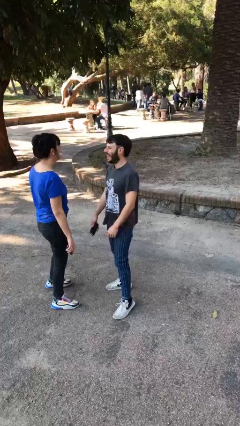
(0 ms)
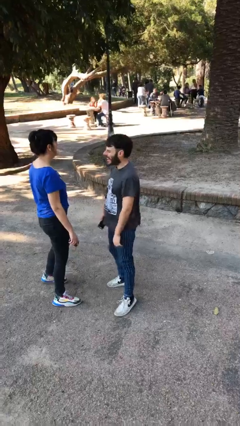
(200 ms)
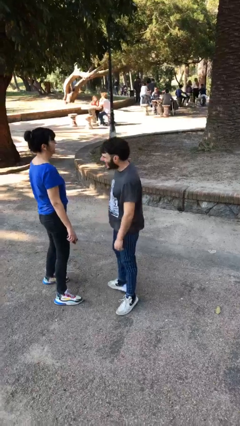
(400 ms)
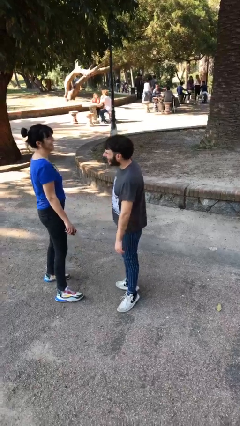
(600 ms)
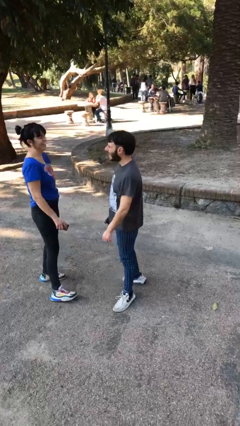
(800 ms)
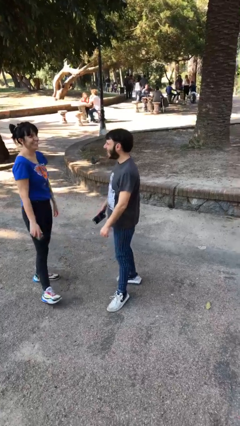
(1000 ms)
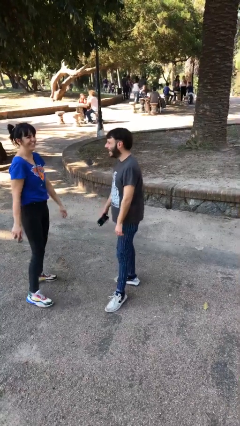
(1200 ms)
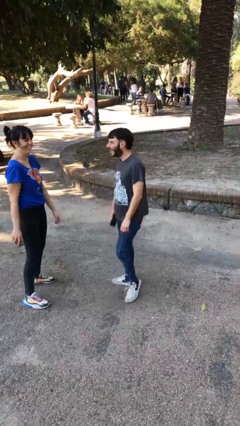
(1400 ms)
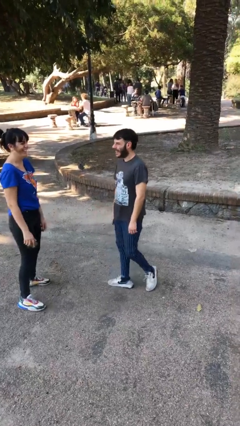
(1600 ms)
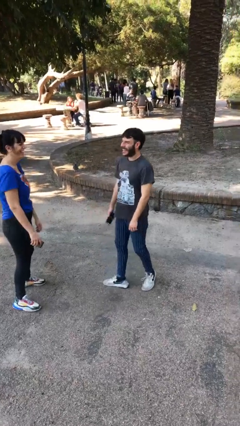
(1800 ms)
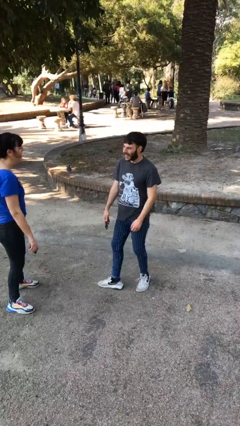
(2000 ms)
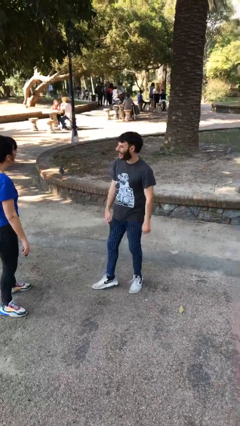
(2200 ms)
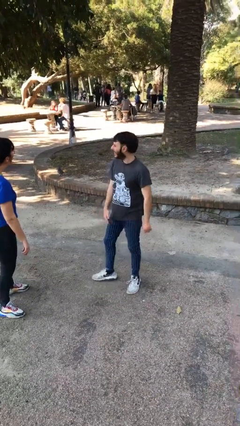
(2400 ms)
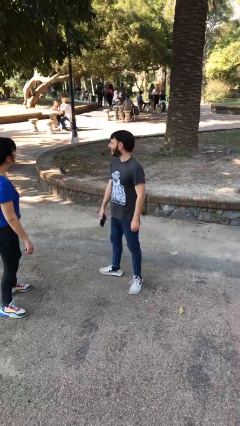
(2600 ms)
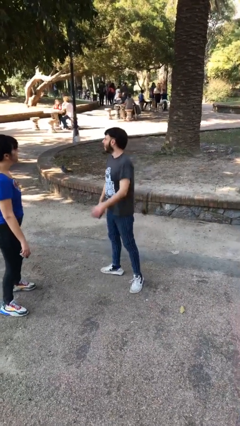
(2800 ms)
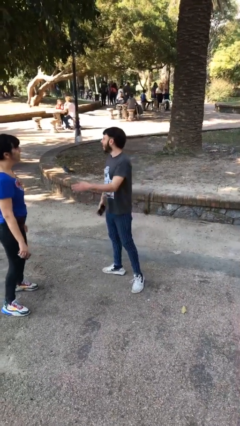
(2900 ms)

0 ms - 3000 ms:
person laughs with person

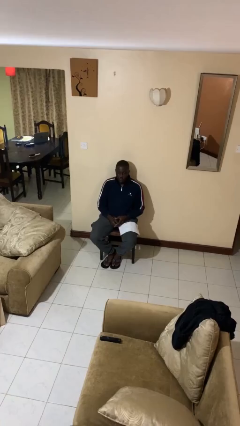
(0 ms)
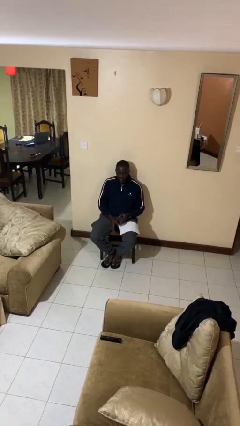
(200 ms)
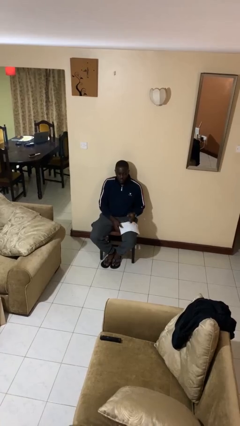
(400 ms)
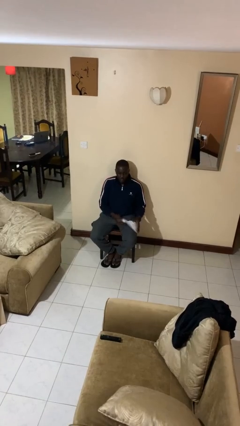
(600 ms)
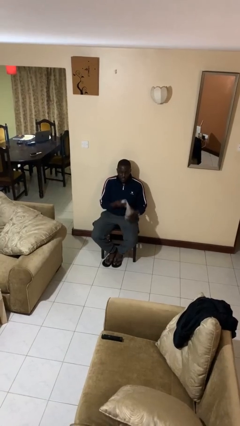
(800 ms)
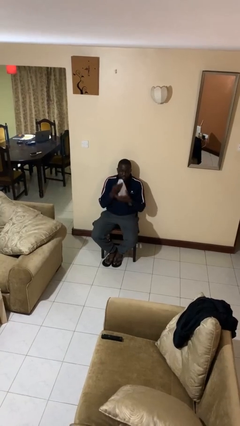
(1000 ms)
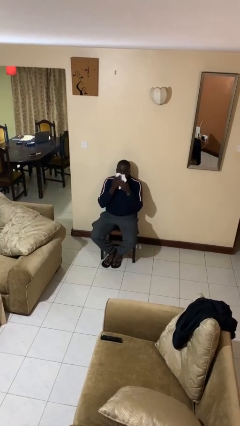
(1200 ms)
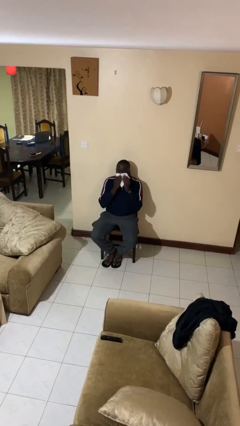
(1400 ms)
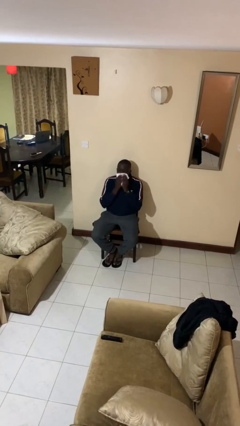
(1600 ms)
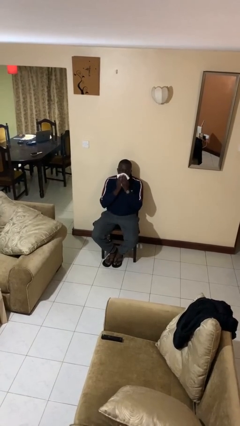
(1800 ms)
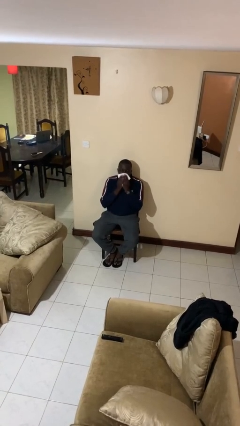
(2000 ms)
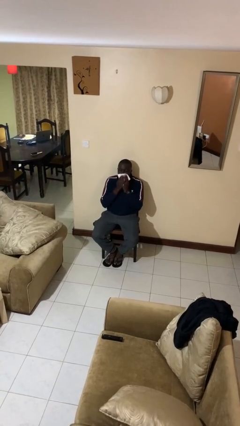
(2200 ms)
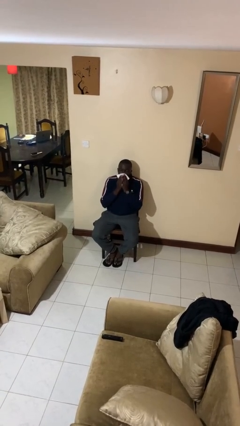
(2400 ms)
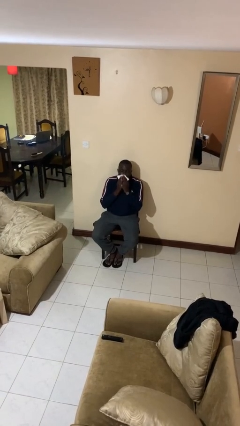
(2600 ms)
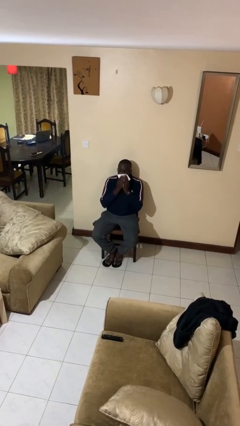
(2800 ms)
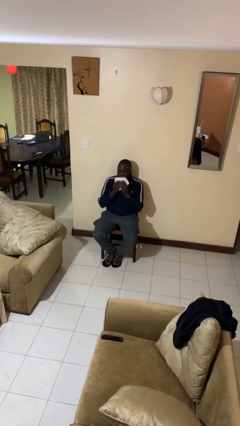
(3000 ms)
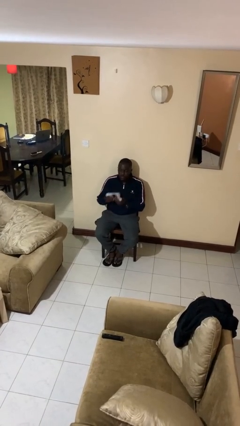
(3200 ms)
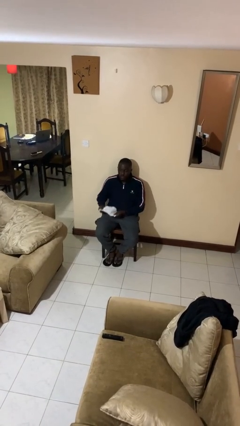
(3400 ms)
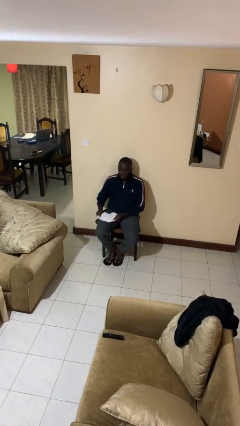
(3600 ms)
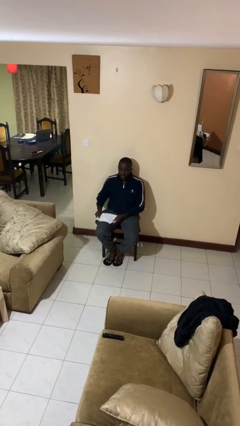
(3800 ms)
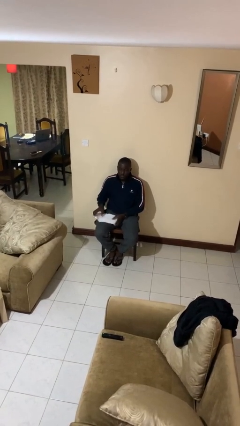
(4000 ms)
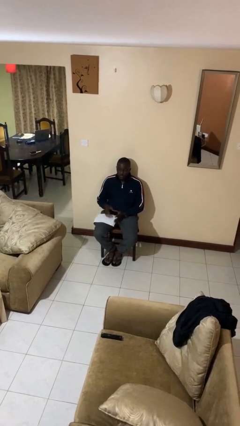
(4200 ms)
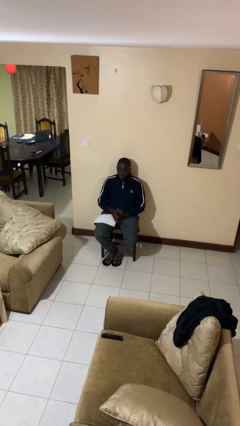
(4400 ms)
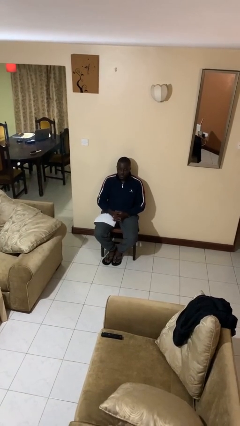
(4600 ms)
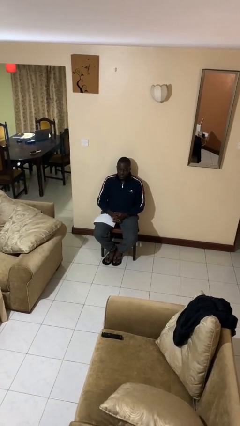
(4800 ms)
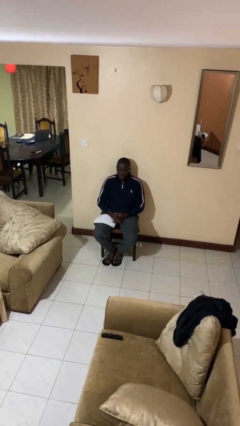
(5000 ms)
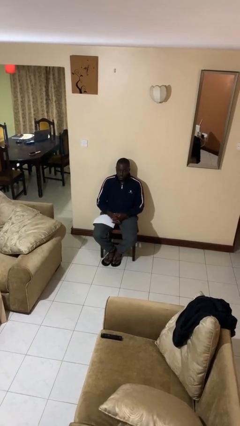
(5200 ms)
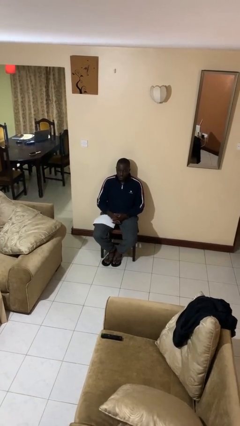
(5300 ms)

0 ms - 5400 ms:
person wipes mouth with napkin

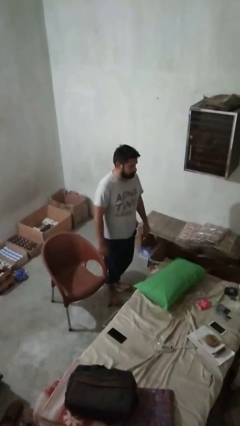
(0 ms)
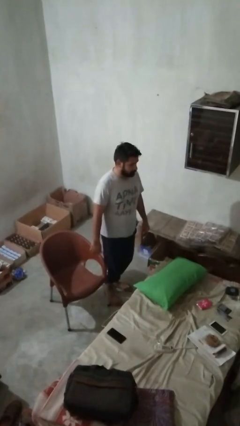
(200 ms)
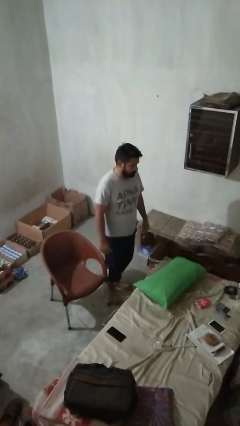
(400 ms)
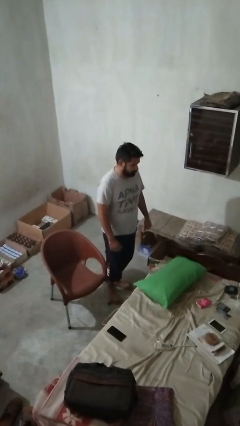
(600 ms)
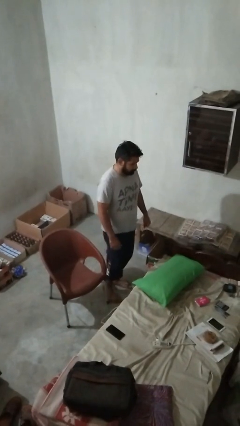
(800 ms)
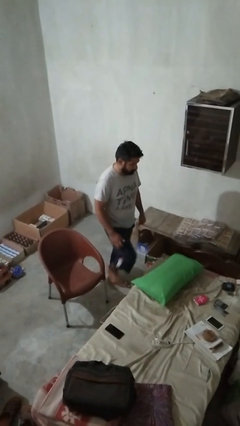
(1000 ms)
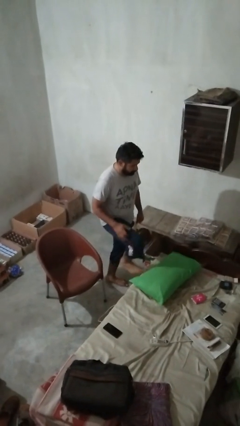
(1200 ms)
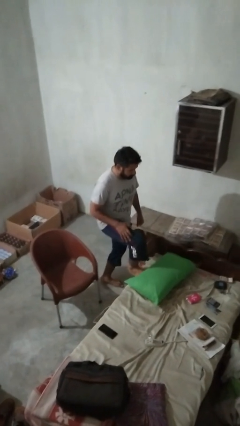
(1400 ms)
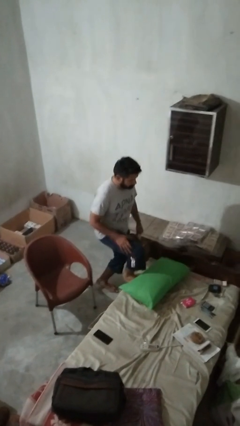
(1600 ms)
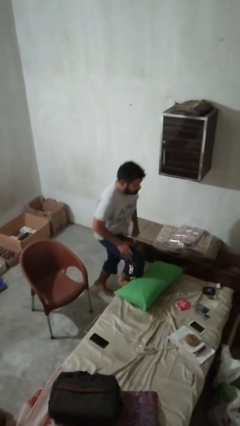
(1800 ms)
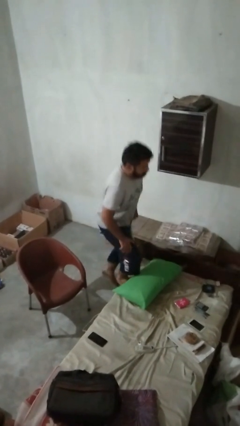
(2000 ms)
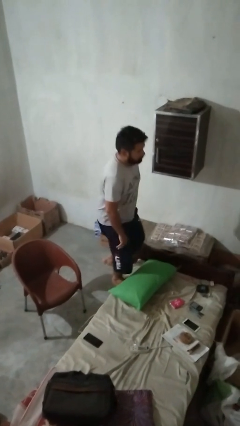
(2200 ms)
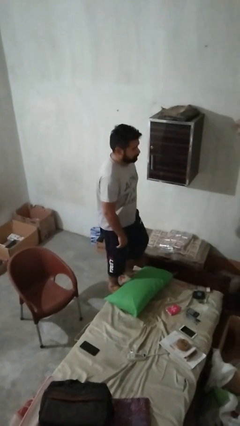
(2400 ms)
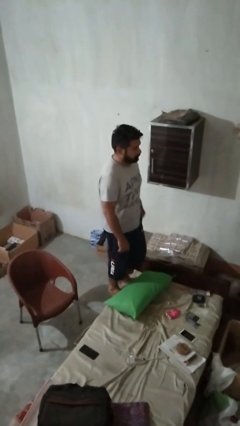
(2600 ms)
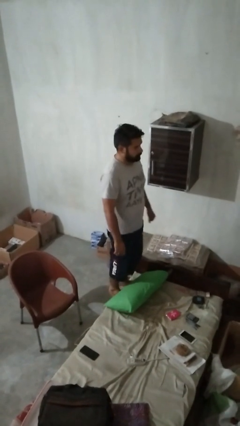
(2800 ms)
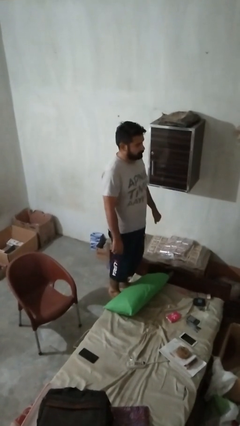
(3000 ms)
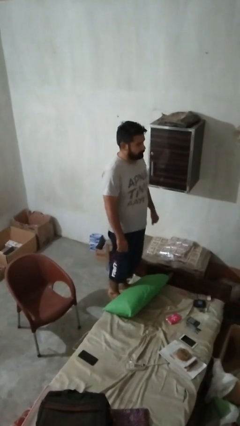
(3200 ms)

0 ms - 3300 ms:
person climbs on couch

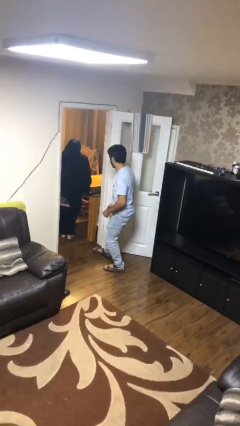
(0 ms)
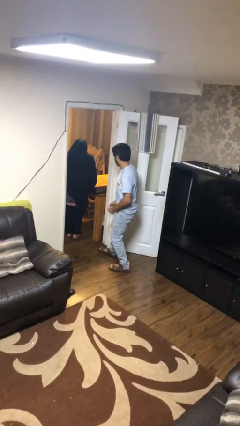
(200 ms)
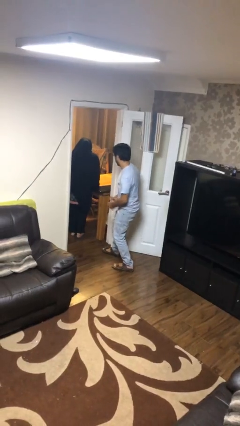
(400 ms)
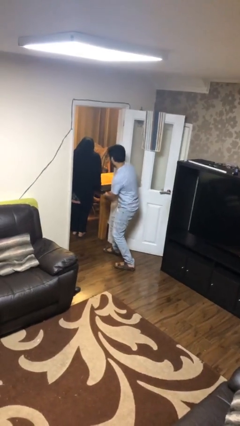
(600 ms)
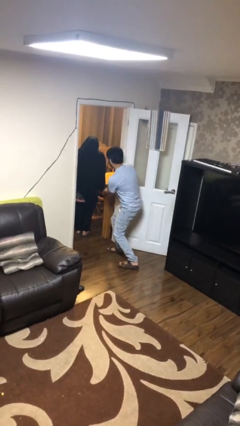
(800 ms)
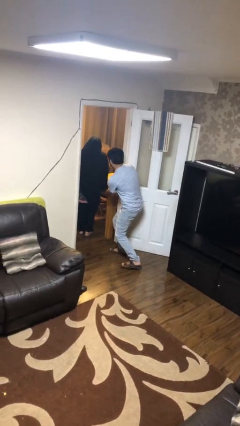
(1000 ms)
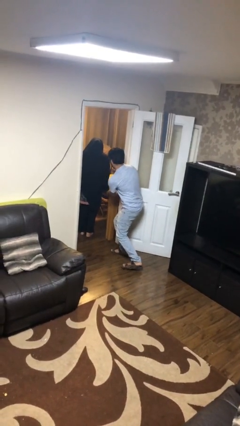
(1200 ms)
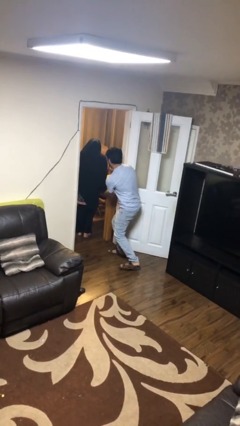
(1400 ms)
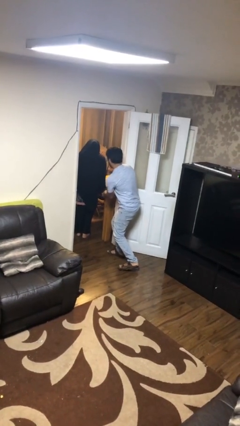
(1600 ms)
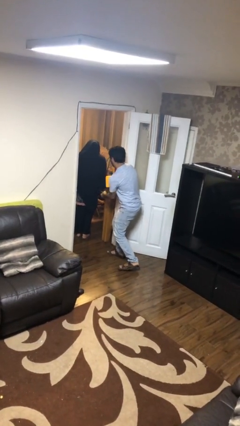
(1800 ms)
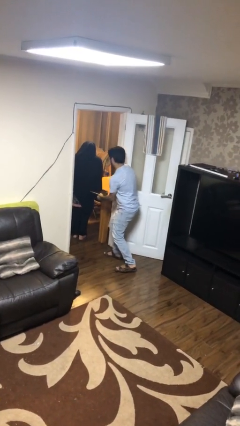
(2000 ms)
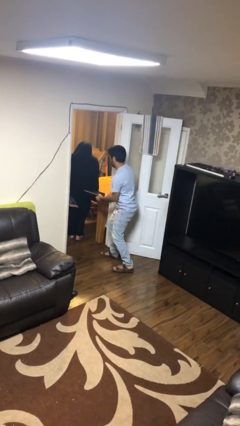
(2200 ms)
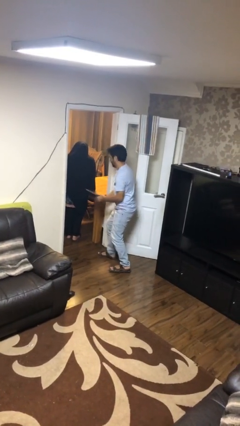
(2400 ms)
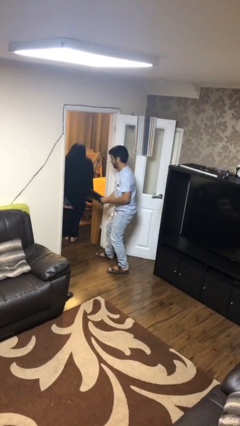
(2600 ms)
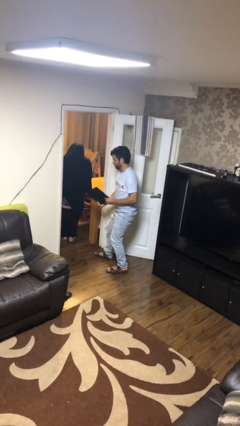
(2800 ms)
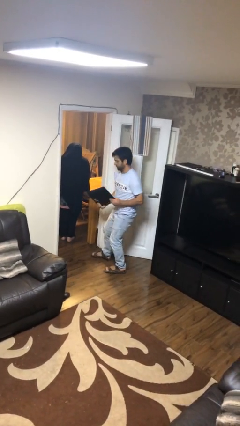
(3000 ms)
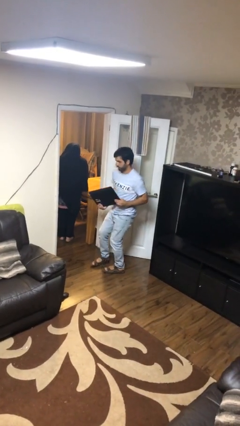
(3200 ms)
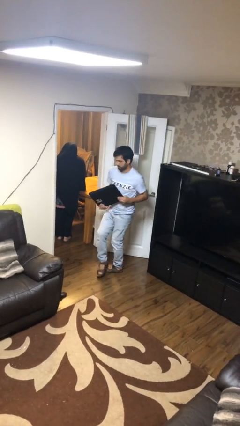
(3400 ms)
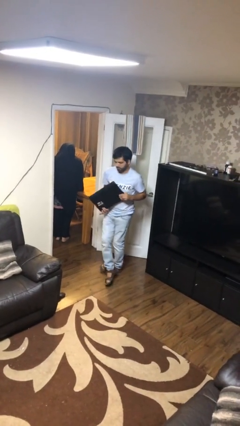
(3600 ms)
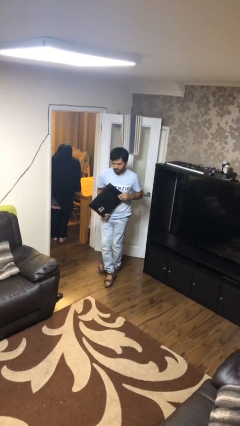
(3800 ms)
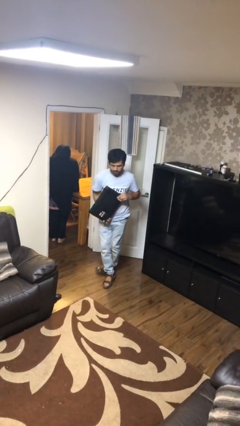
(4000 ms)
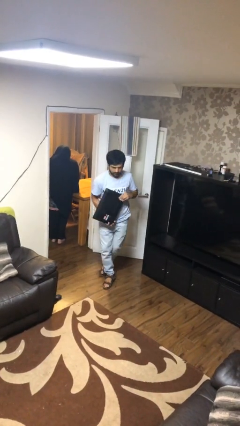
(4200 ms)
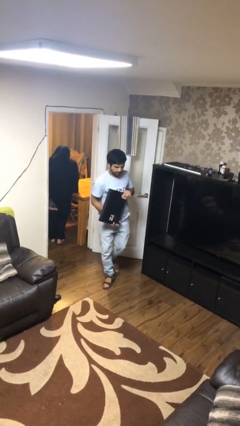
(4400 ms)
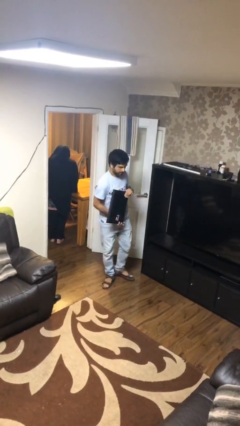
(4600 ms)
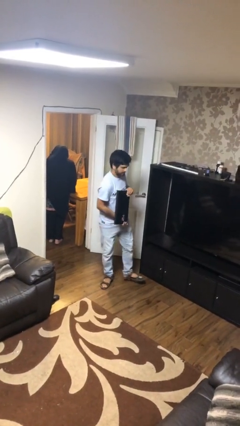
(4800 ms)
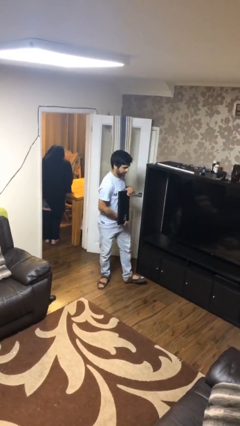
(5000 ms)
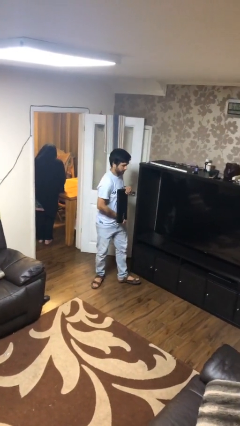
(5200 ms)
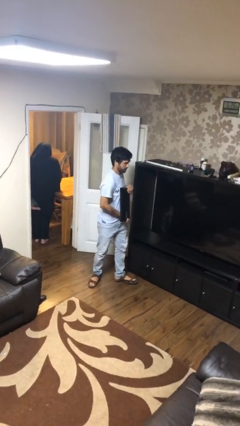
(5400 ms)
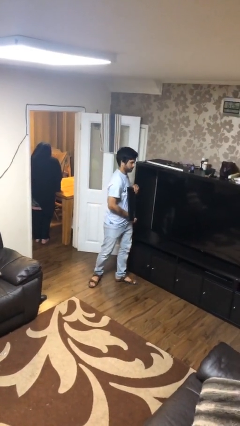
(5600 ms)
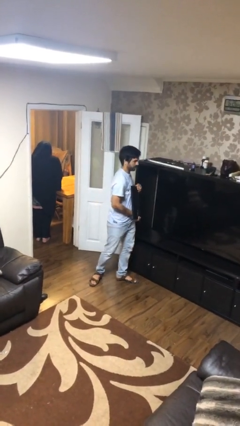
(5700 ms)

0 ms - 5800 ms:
person steals object from person

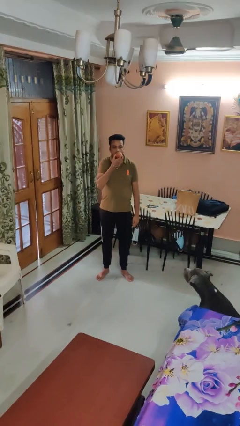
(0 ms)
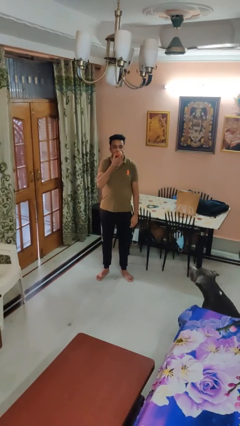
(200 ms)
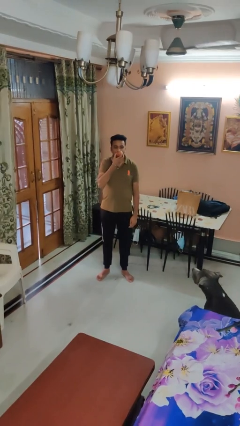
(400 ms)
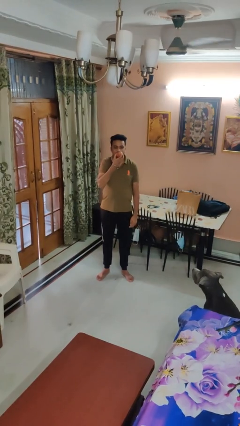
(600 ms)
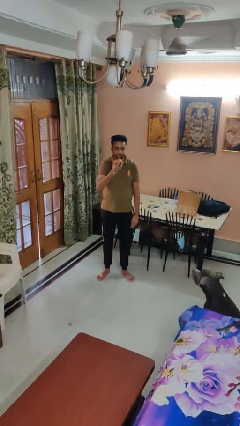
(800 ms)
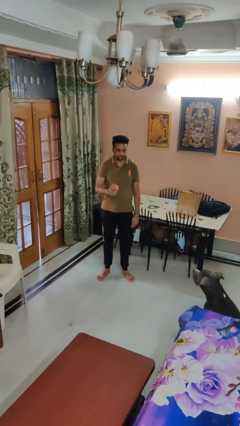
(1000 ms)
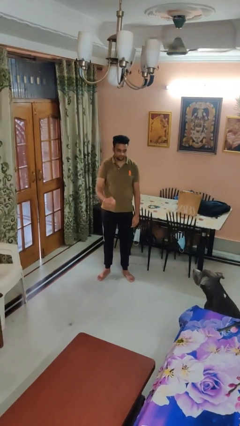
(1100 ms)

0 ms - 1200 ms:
person eats apple
